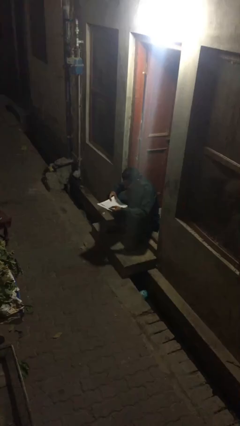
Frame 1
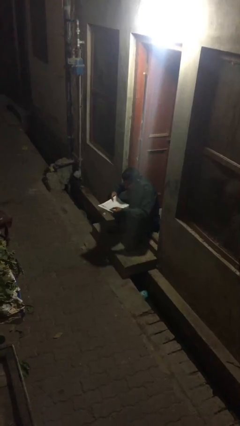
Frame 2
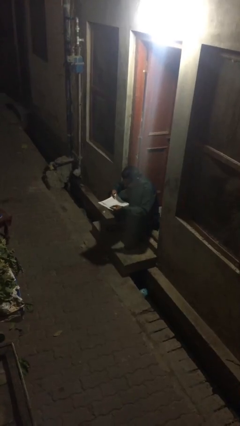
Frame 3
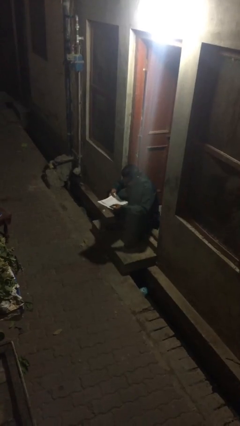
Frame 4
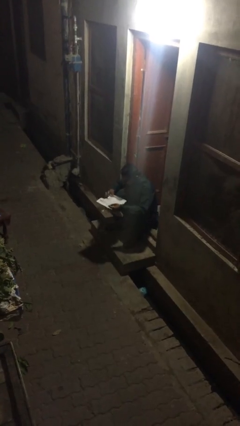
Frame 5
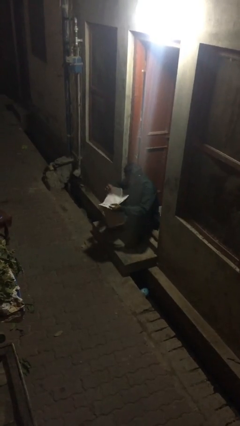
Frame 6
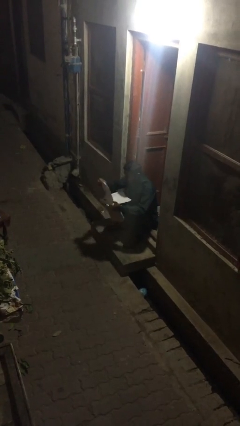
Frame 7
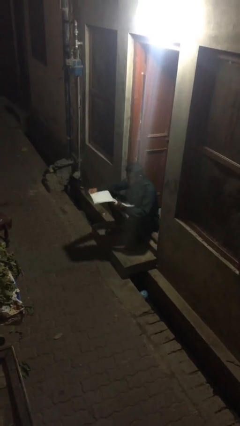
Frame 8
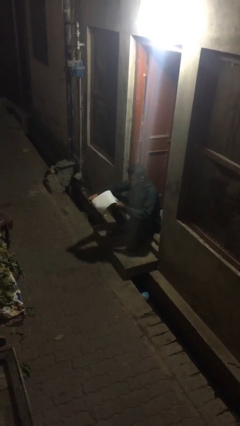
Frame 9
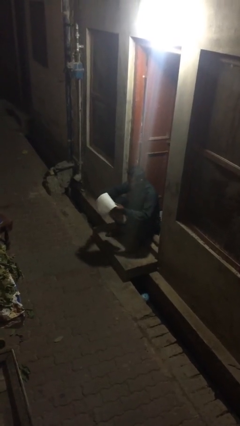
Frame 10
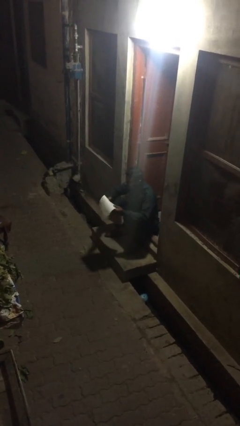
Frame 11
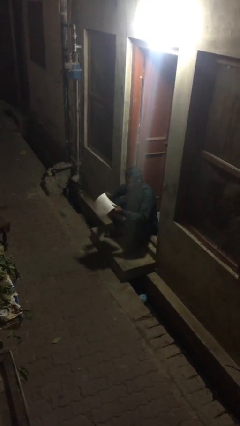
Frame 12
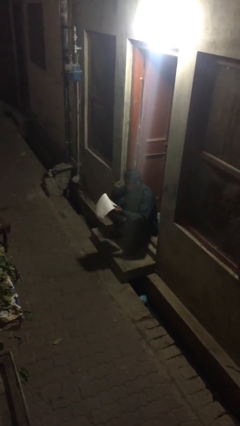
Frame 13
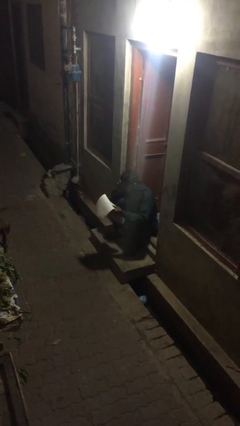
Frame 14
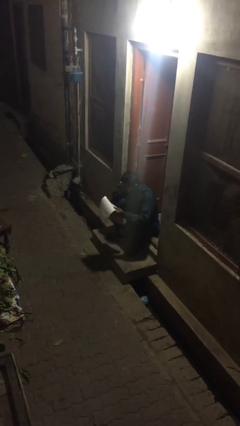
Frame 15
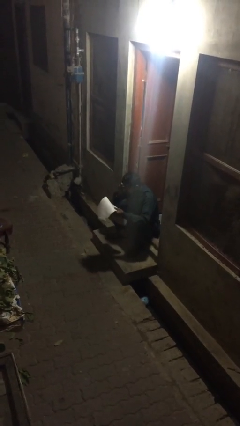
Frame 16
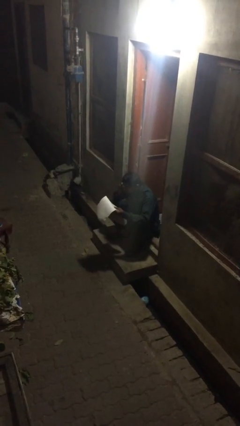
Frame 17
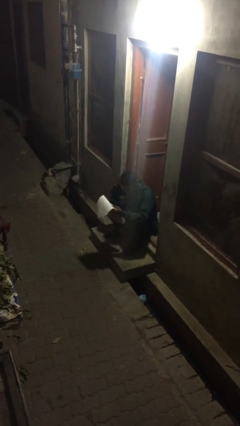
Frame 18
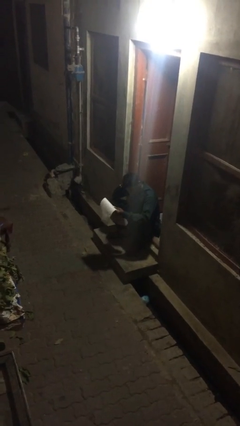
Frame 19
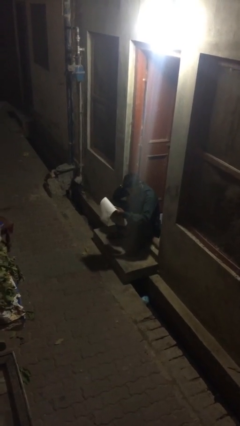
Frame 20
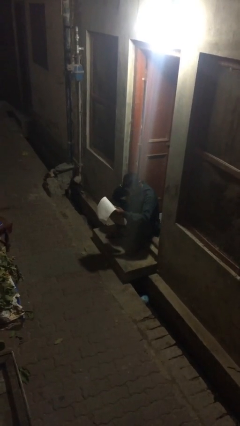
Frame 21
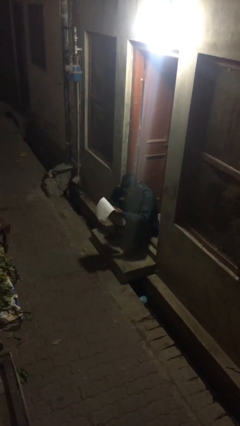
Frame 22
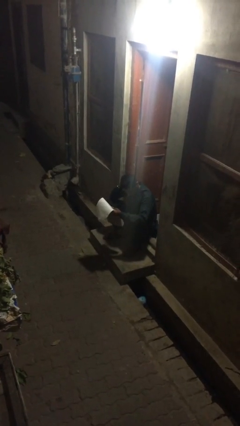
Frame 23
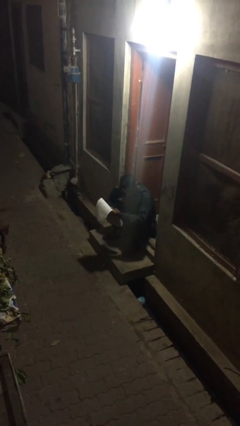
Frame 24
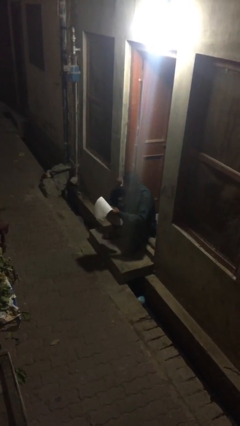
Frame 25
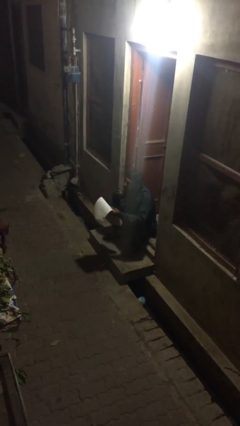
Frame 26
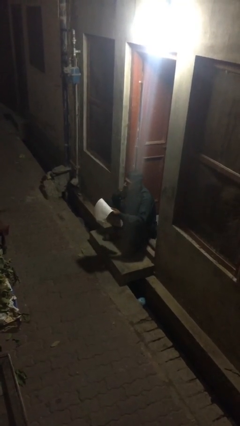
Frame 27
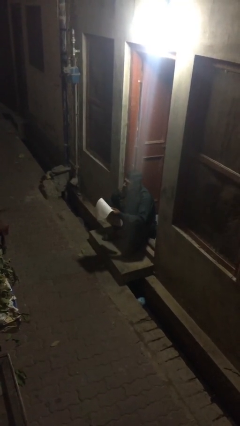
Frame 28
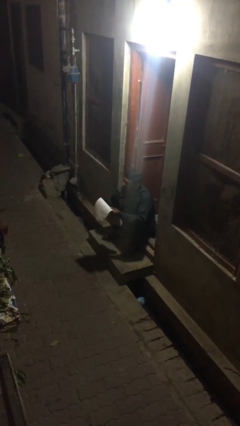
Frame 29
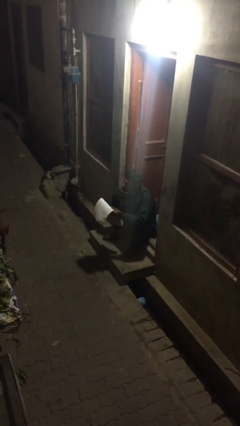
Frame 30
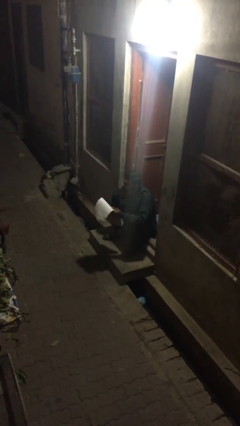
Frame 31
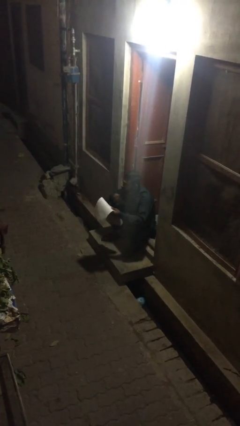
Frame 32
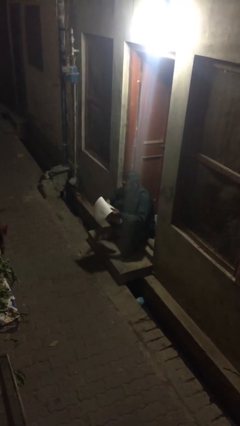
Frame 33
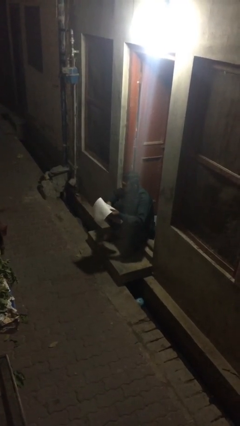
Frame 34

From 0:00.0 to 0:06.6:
person reads document

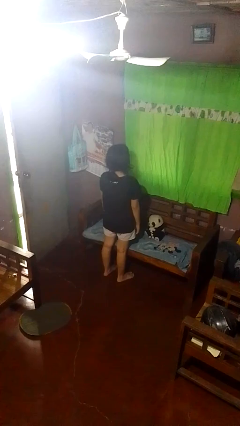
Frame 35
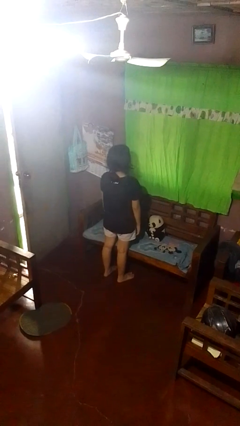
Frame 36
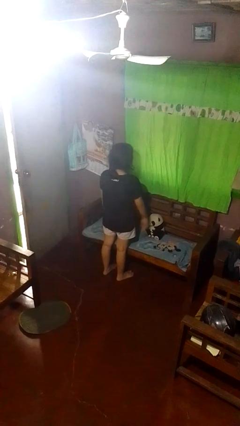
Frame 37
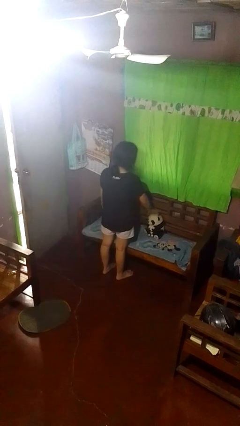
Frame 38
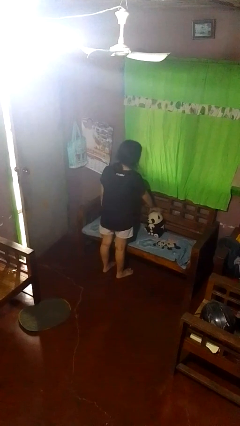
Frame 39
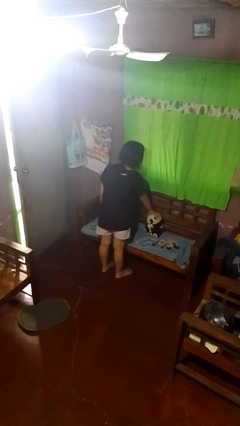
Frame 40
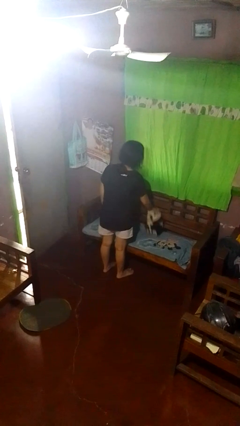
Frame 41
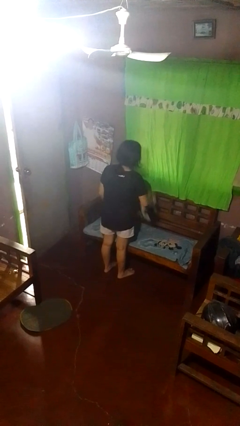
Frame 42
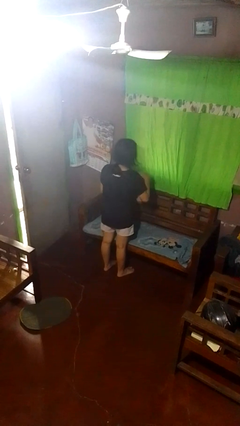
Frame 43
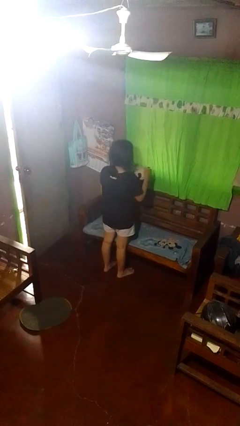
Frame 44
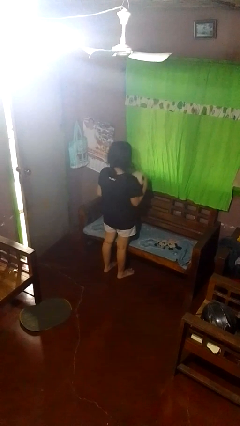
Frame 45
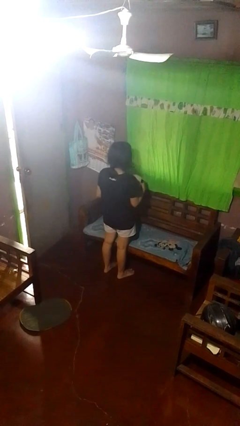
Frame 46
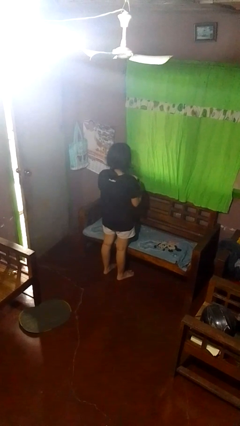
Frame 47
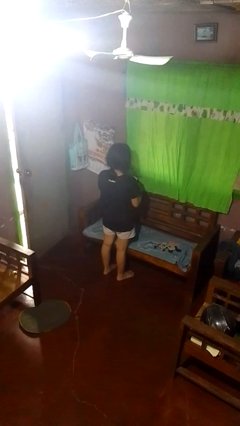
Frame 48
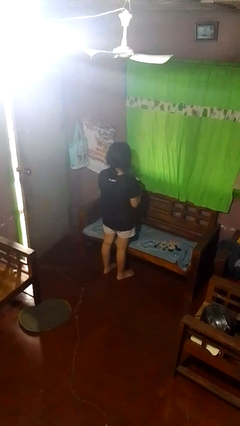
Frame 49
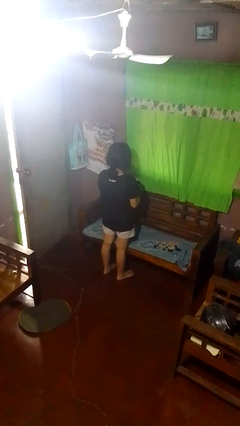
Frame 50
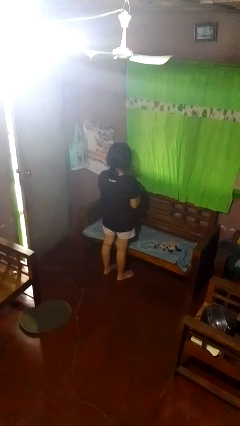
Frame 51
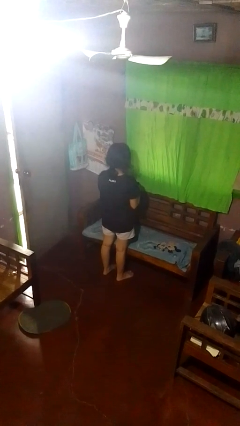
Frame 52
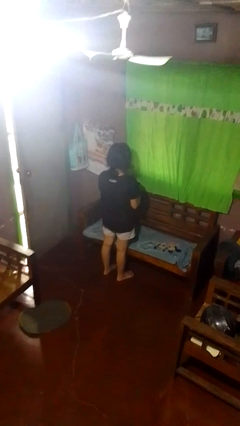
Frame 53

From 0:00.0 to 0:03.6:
person picks up object from couch

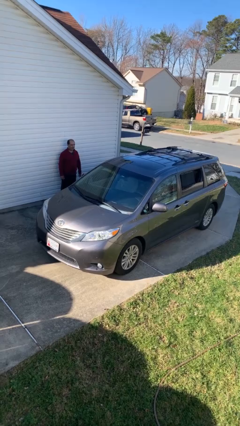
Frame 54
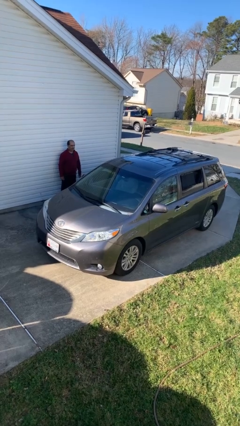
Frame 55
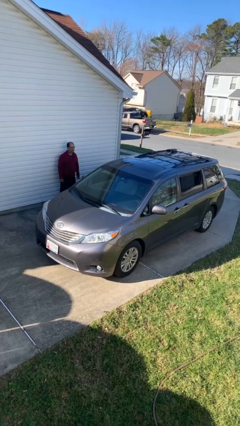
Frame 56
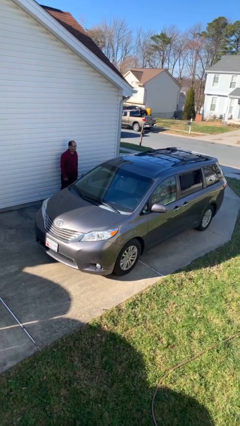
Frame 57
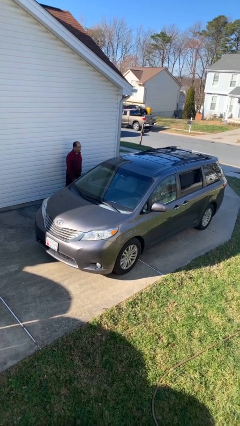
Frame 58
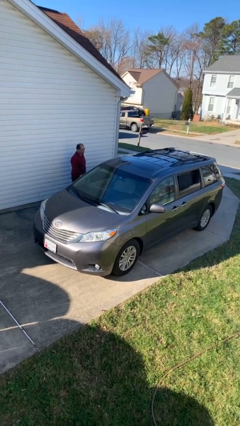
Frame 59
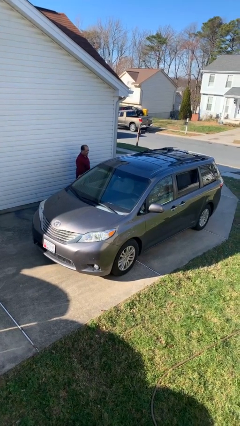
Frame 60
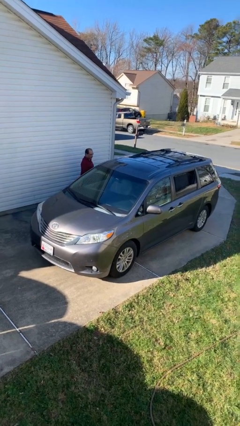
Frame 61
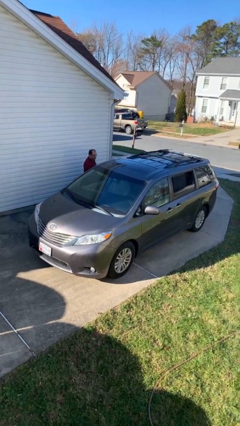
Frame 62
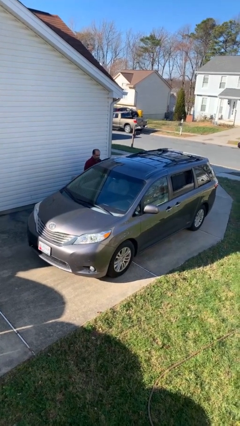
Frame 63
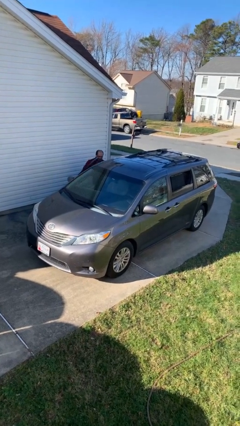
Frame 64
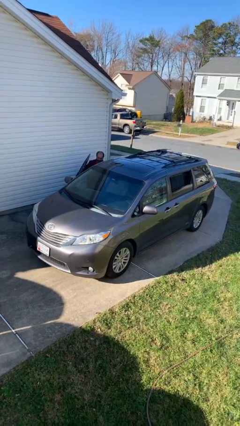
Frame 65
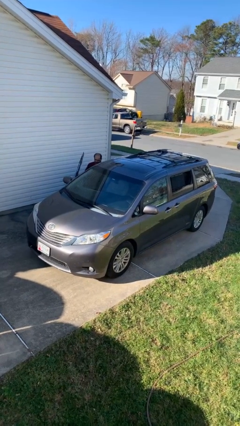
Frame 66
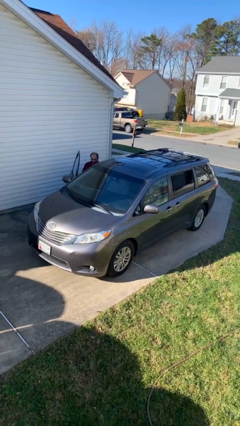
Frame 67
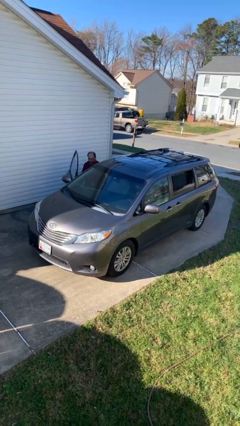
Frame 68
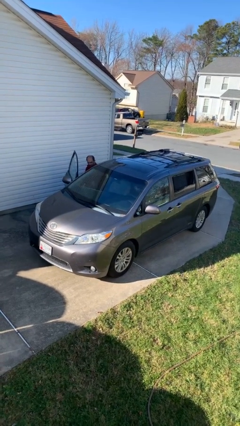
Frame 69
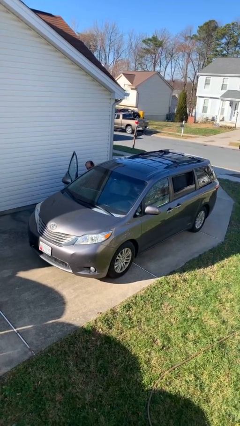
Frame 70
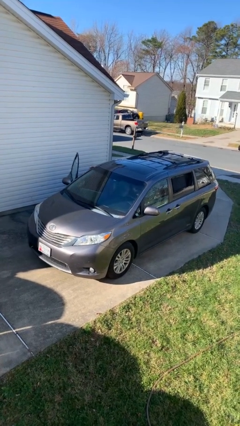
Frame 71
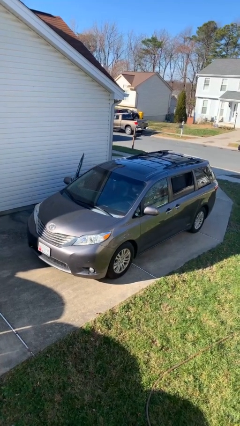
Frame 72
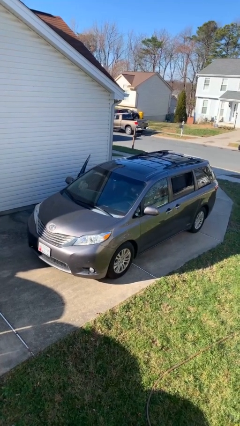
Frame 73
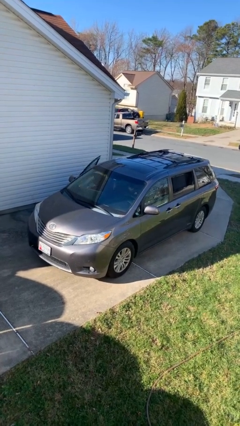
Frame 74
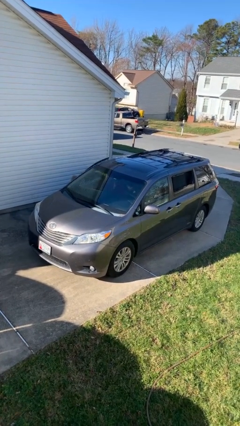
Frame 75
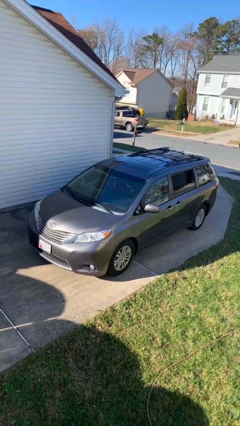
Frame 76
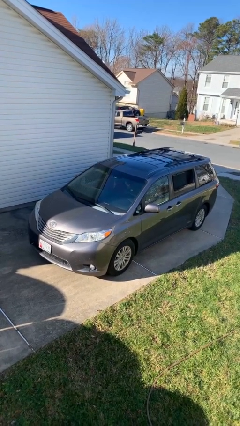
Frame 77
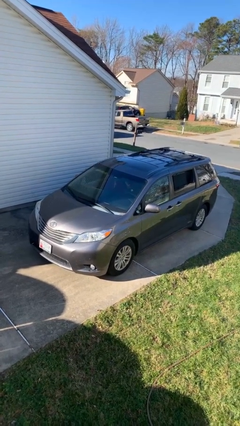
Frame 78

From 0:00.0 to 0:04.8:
car picks up person

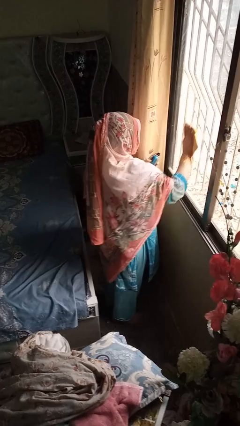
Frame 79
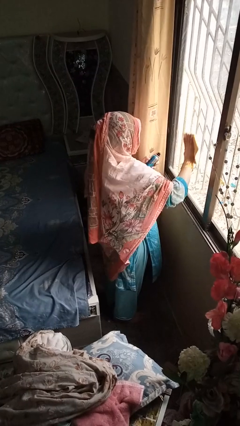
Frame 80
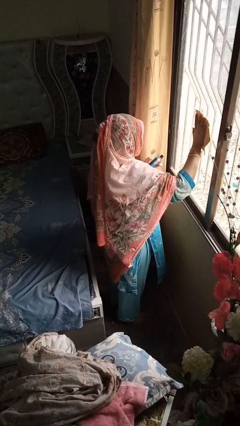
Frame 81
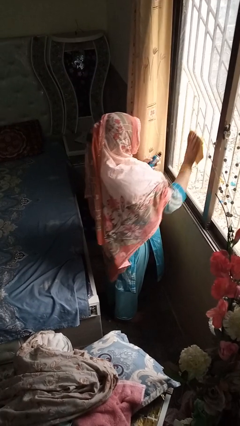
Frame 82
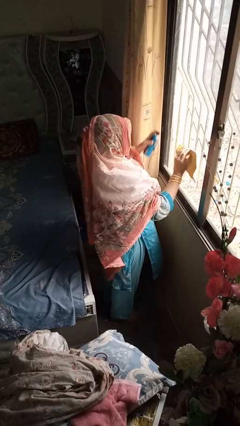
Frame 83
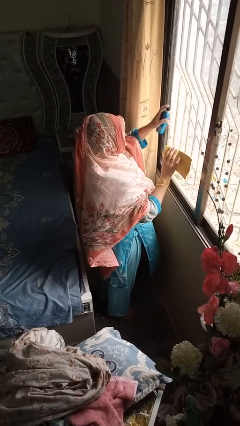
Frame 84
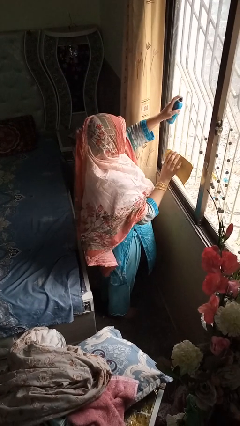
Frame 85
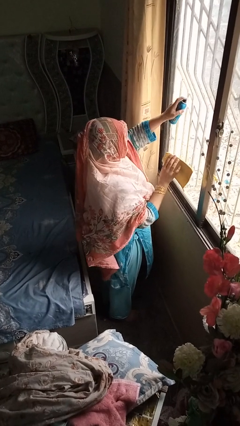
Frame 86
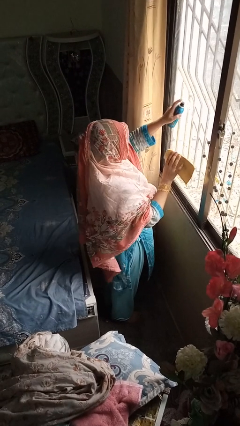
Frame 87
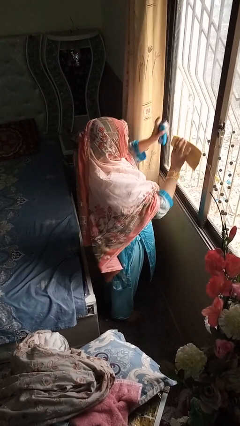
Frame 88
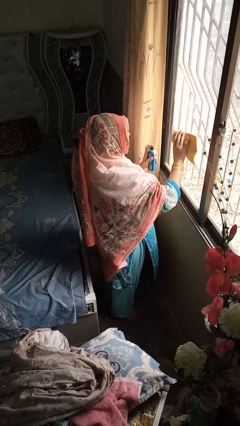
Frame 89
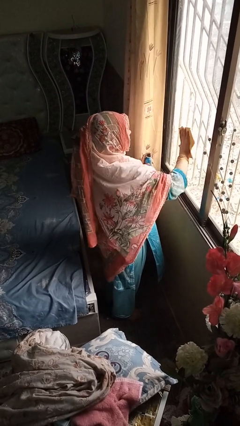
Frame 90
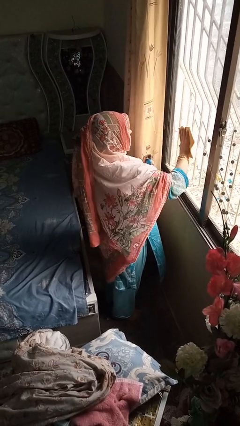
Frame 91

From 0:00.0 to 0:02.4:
person sprays from bottle

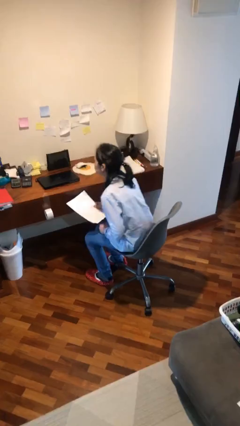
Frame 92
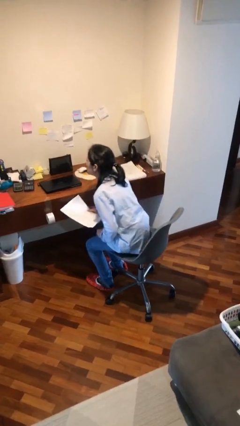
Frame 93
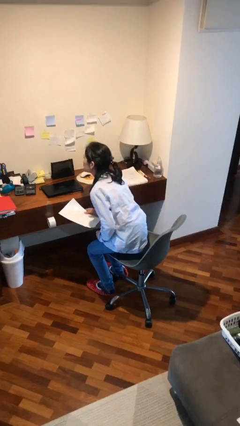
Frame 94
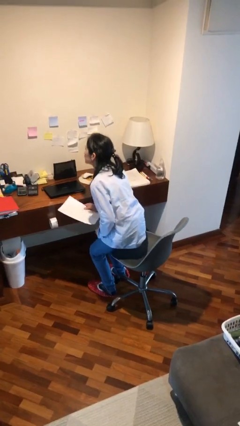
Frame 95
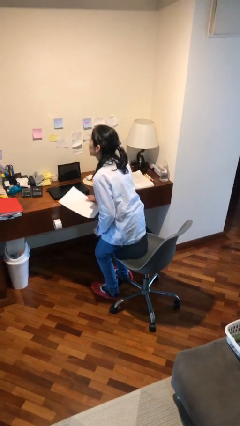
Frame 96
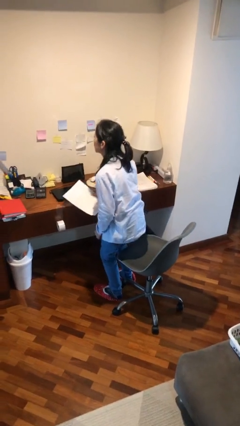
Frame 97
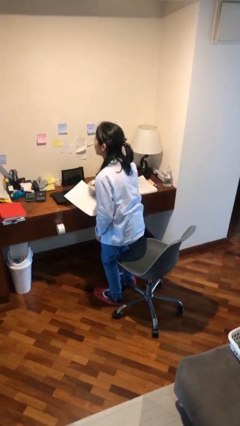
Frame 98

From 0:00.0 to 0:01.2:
person stands up
